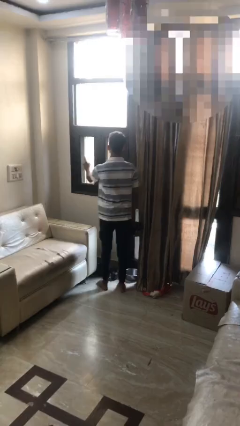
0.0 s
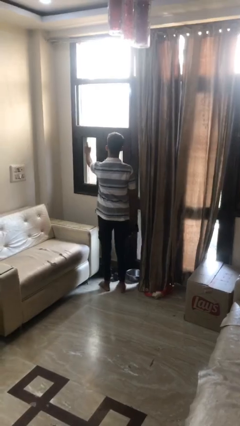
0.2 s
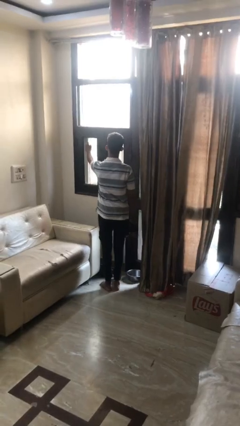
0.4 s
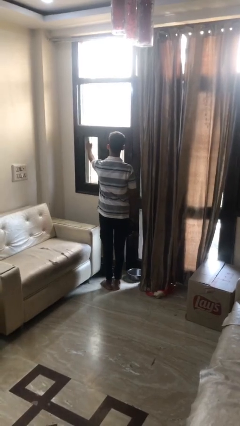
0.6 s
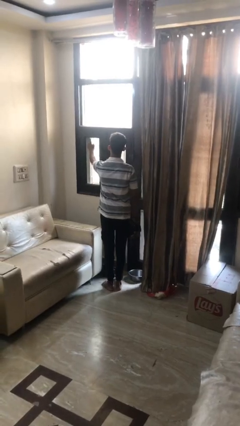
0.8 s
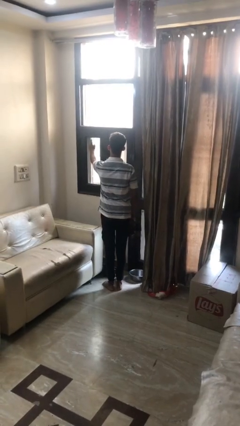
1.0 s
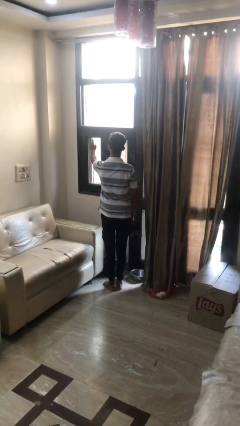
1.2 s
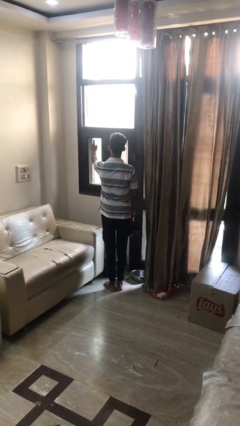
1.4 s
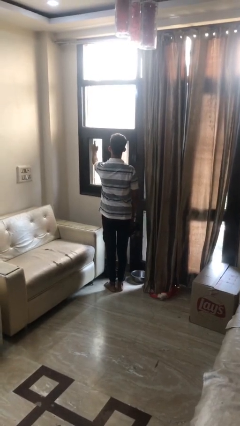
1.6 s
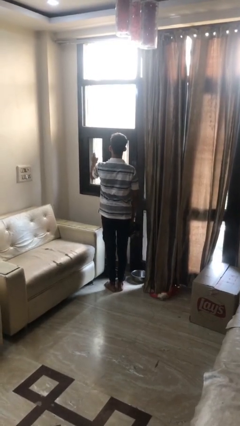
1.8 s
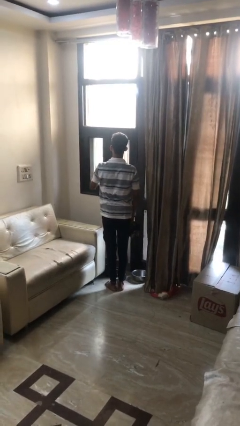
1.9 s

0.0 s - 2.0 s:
person sprays from bottle

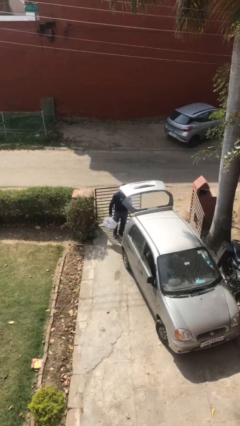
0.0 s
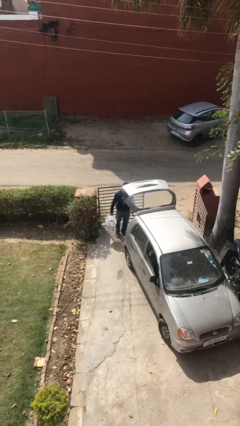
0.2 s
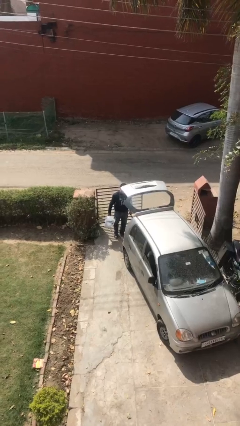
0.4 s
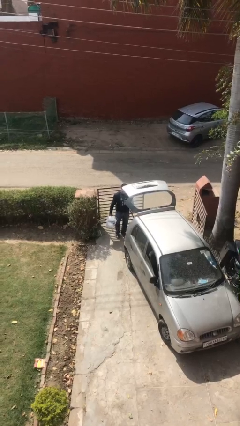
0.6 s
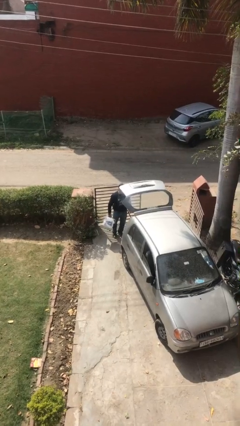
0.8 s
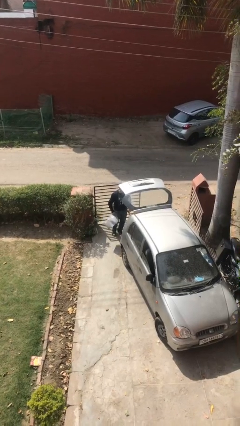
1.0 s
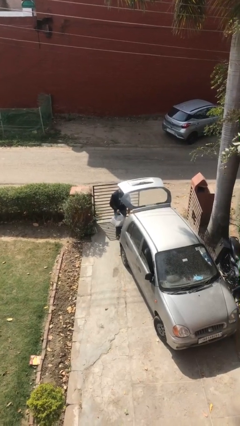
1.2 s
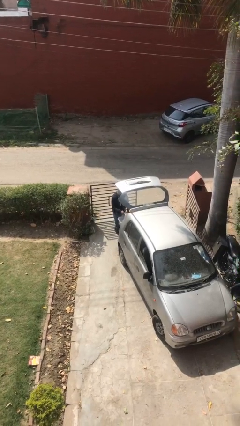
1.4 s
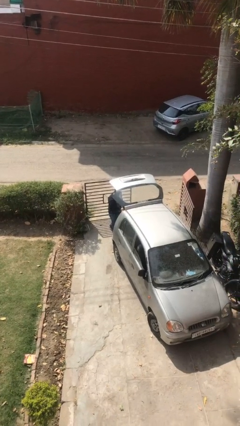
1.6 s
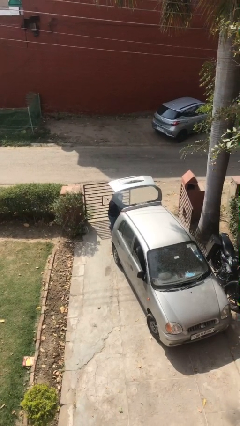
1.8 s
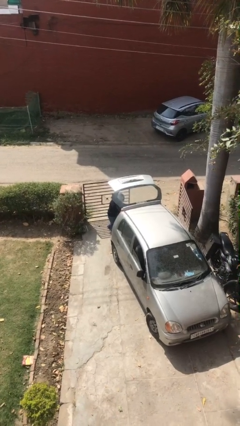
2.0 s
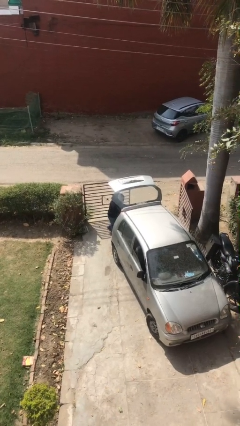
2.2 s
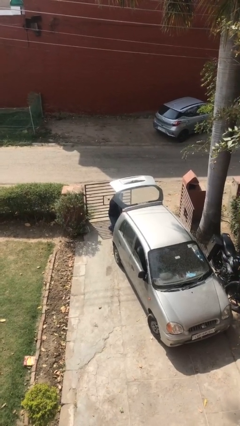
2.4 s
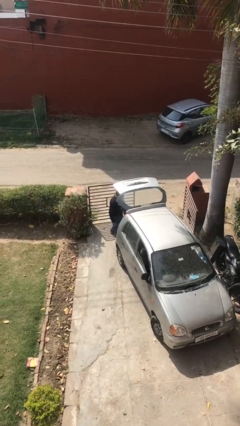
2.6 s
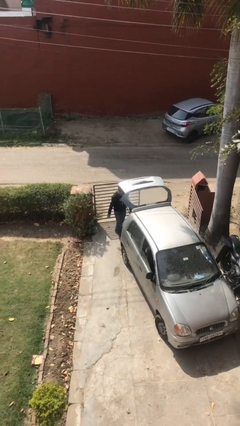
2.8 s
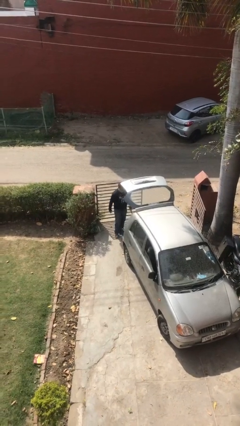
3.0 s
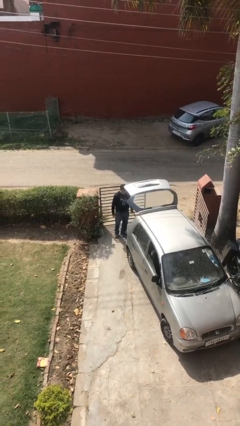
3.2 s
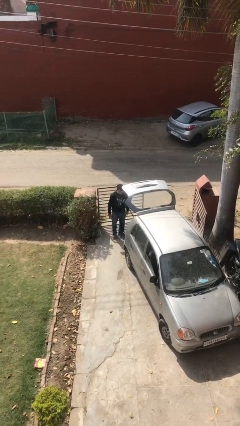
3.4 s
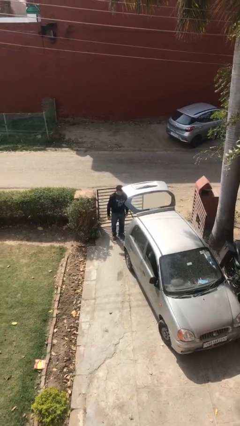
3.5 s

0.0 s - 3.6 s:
person loads car

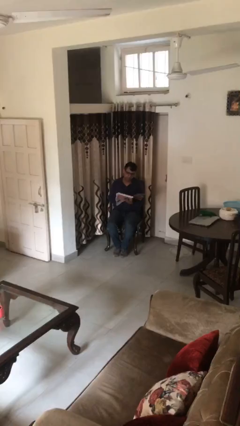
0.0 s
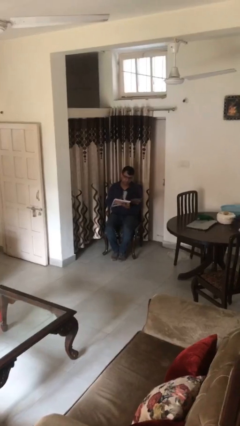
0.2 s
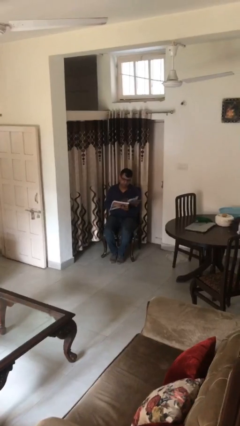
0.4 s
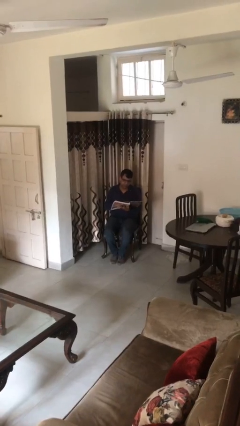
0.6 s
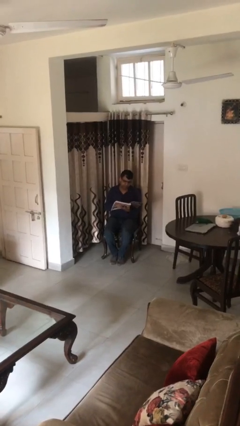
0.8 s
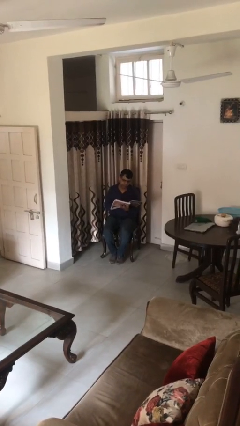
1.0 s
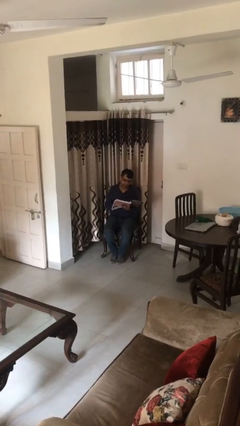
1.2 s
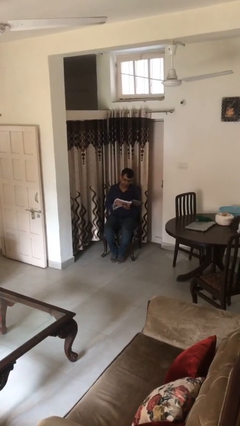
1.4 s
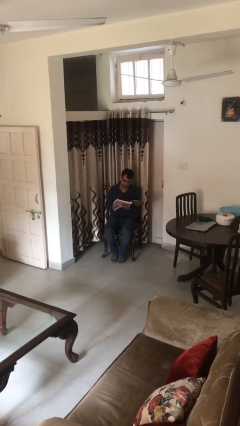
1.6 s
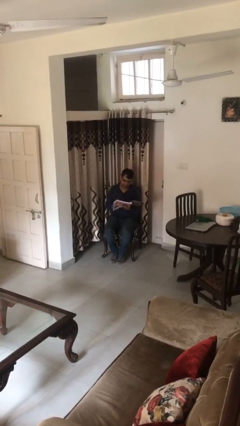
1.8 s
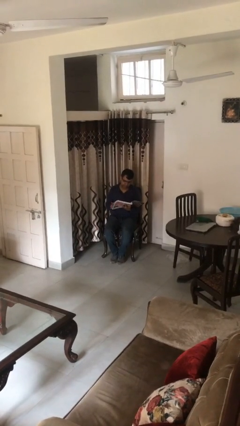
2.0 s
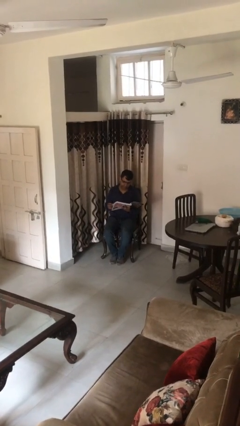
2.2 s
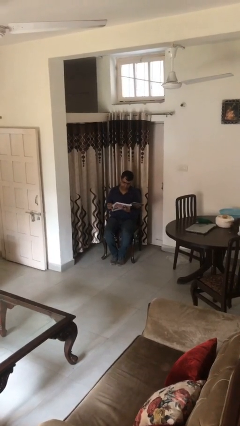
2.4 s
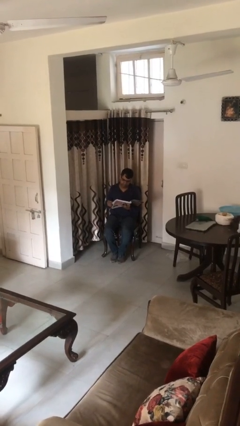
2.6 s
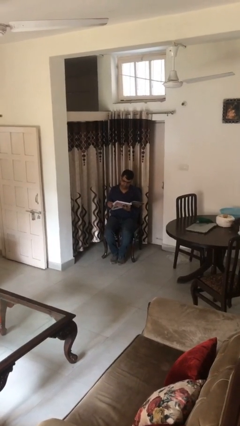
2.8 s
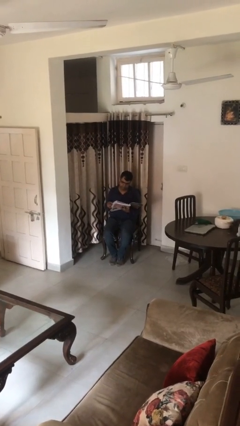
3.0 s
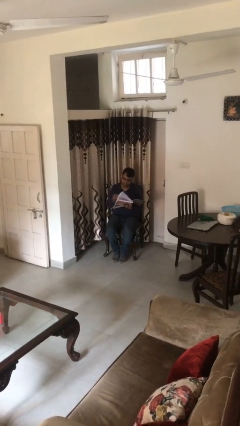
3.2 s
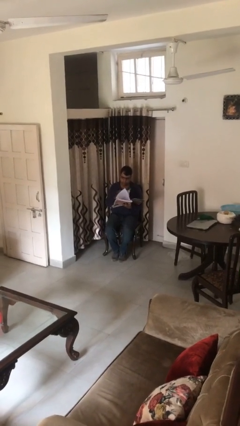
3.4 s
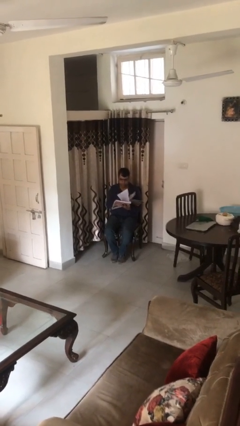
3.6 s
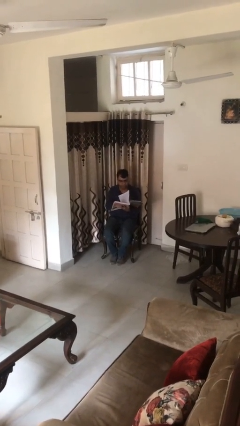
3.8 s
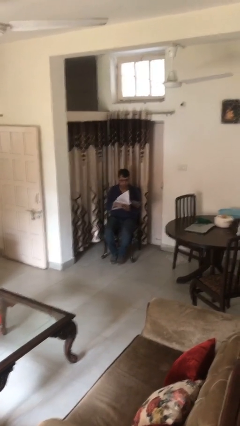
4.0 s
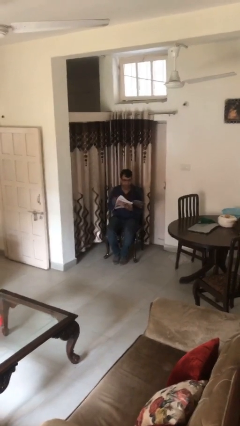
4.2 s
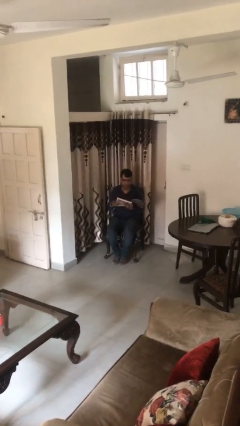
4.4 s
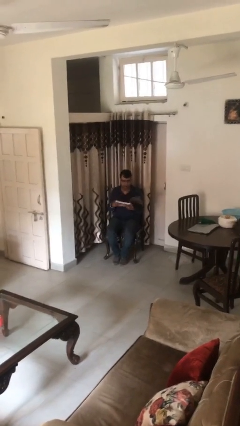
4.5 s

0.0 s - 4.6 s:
person reads document

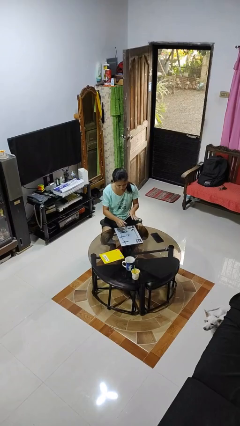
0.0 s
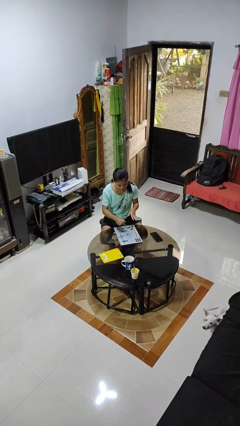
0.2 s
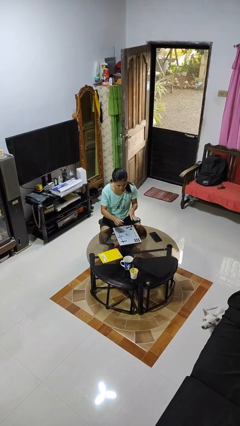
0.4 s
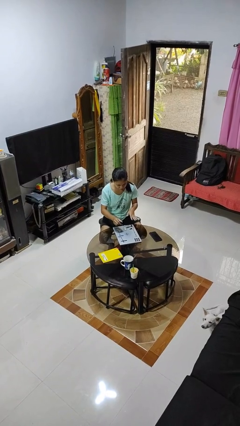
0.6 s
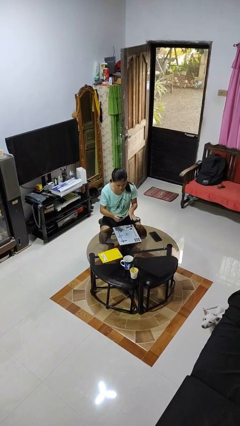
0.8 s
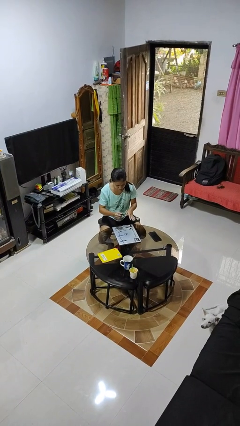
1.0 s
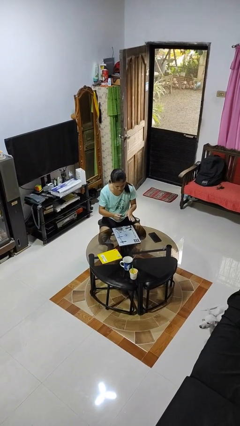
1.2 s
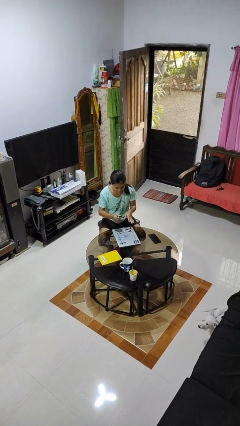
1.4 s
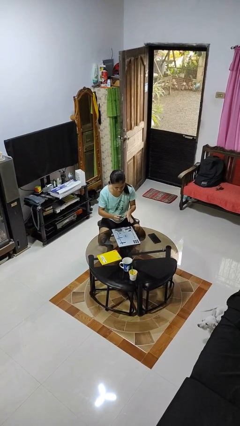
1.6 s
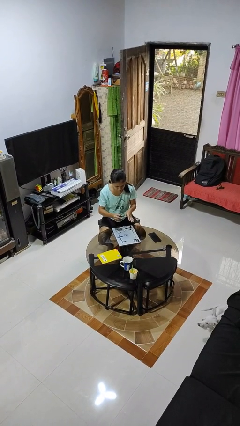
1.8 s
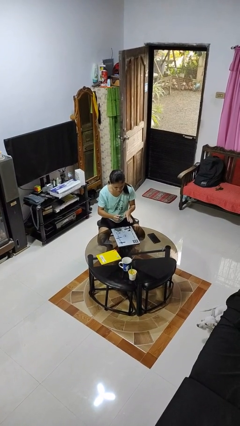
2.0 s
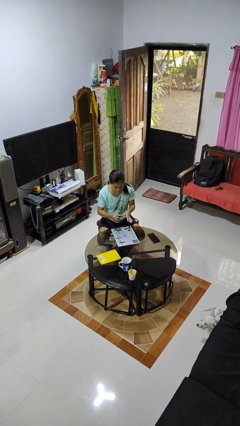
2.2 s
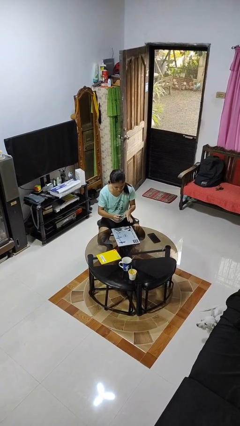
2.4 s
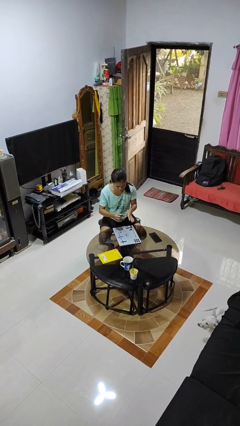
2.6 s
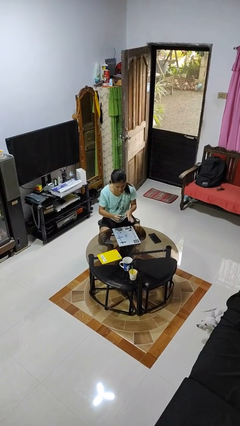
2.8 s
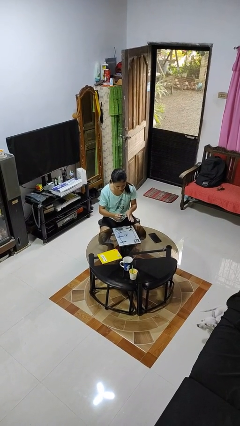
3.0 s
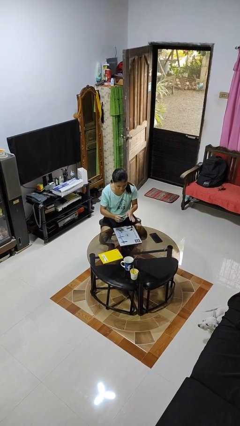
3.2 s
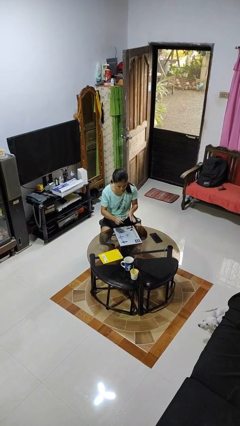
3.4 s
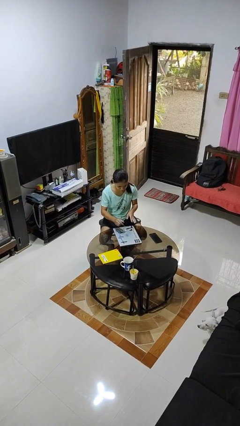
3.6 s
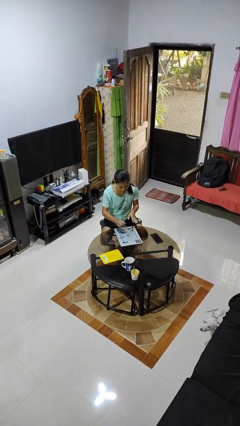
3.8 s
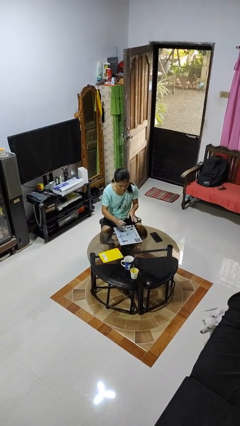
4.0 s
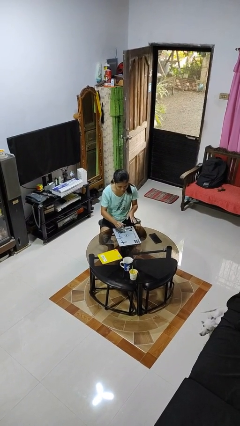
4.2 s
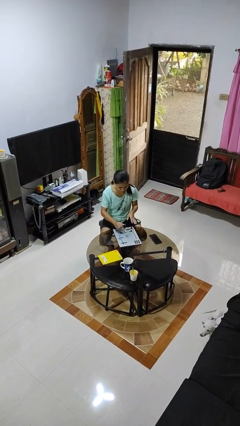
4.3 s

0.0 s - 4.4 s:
person paints fingernails

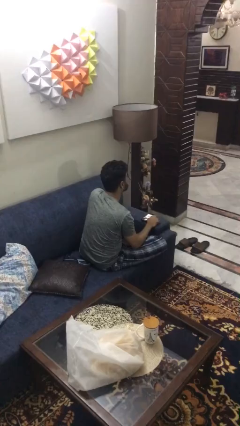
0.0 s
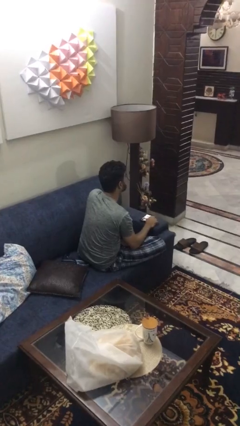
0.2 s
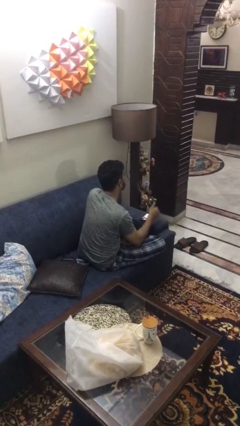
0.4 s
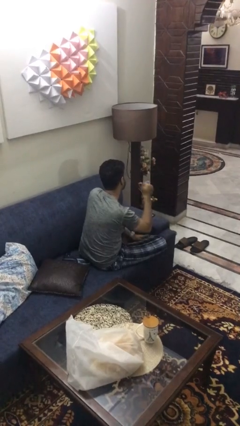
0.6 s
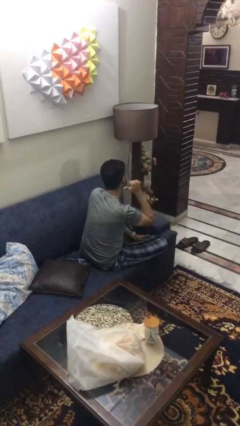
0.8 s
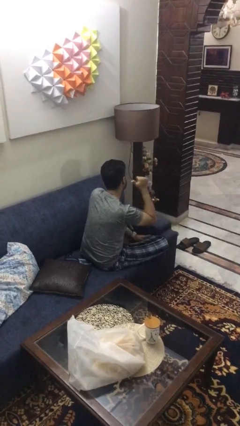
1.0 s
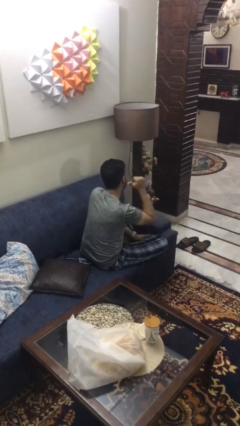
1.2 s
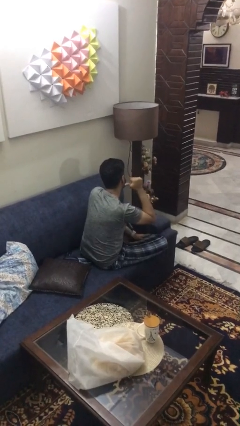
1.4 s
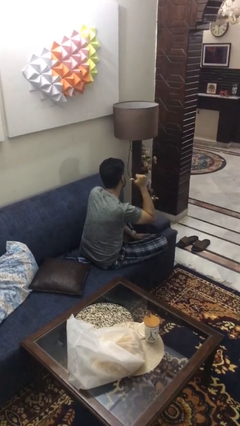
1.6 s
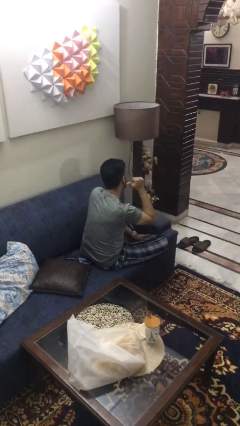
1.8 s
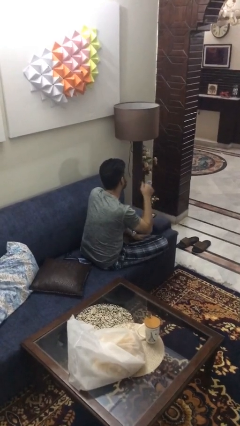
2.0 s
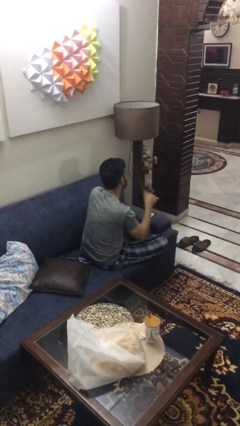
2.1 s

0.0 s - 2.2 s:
person gestures behind me

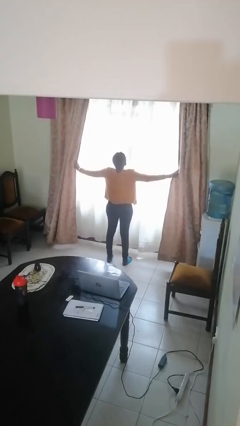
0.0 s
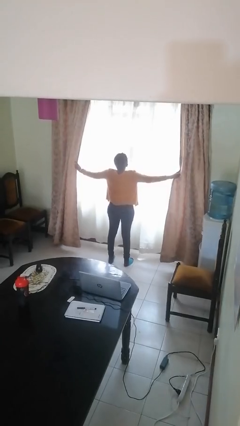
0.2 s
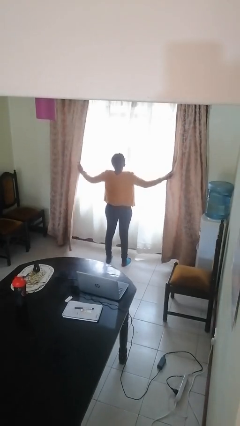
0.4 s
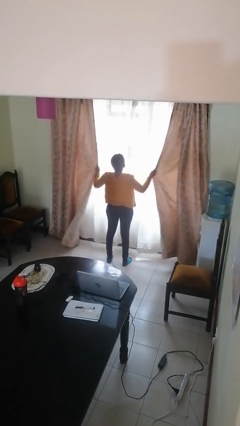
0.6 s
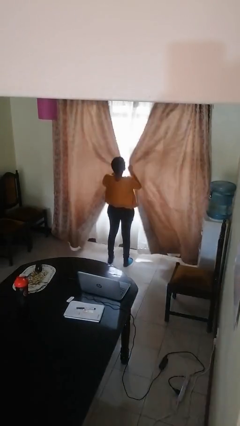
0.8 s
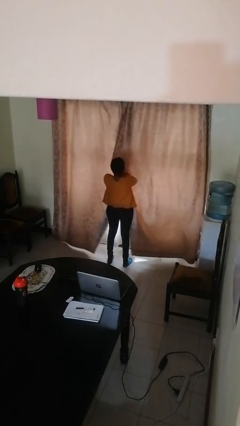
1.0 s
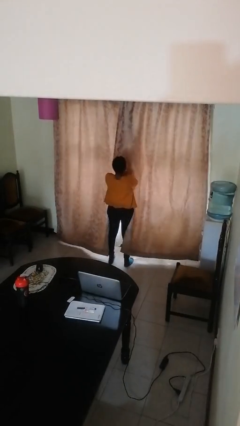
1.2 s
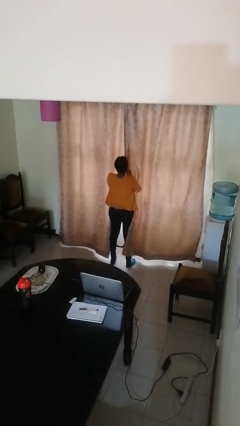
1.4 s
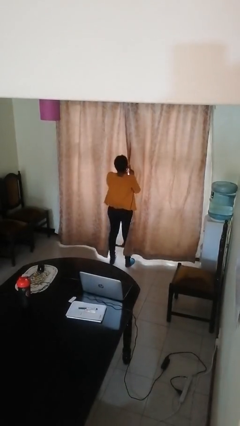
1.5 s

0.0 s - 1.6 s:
person closes curtains
